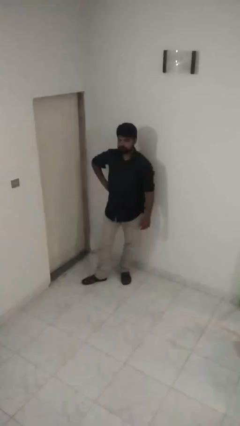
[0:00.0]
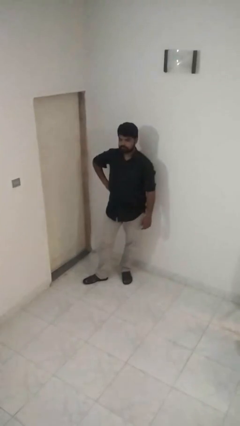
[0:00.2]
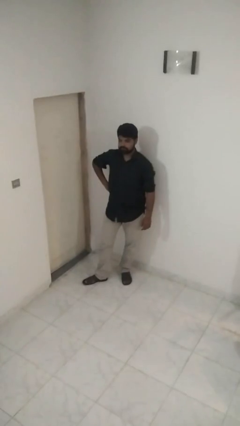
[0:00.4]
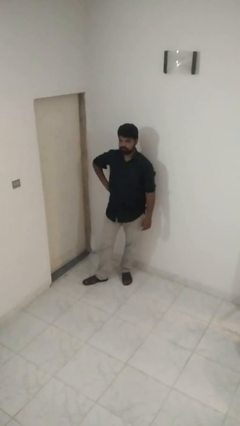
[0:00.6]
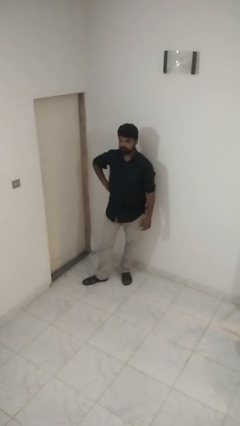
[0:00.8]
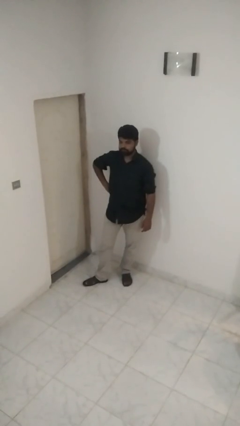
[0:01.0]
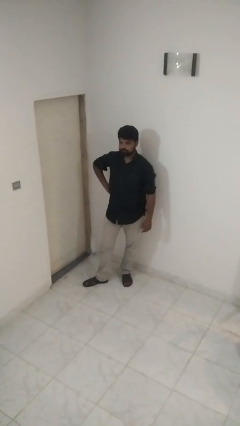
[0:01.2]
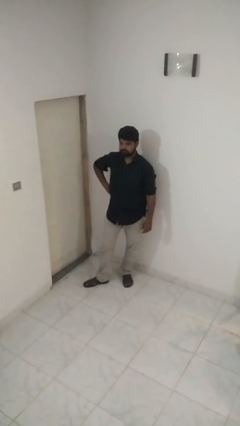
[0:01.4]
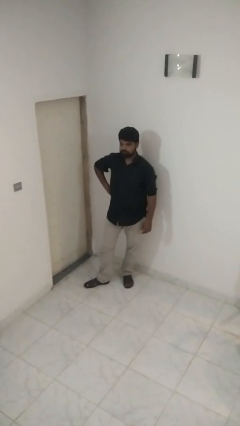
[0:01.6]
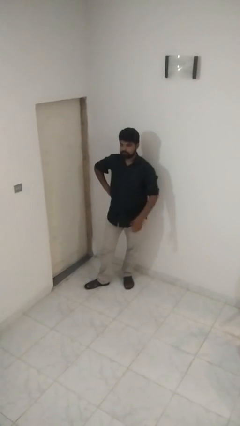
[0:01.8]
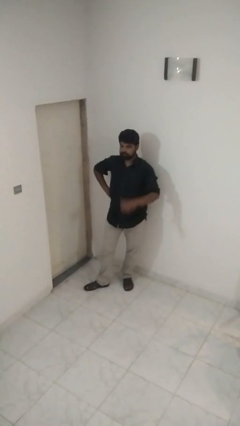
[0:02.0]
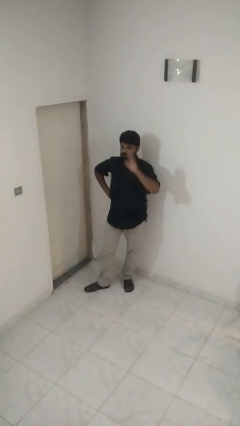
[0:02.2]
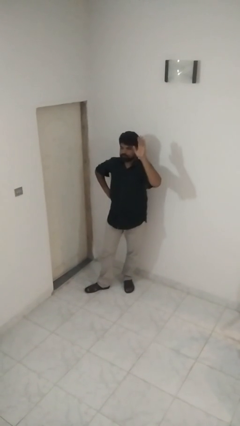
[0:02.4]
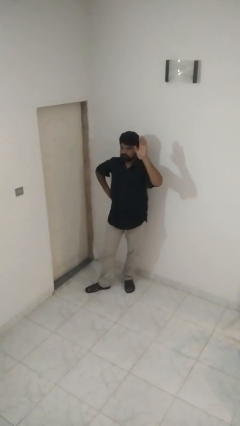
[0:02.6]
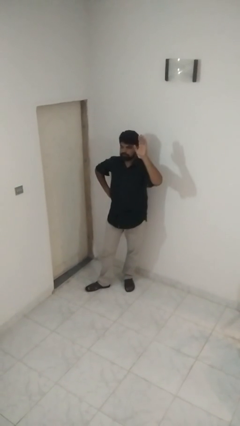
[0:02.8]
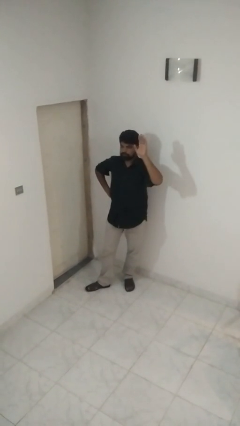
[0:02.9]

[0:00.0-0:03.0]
person gestures raise hand

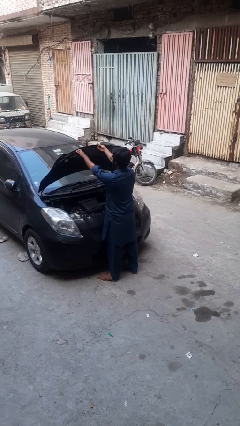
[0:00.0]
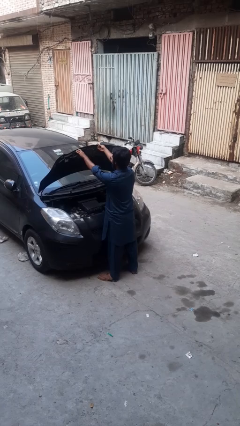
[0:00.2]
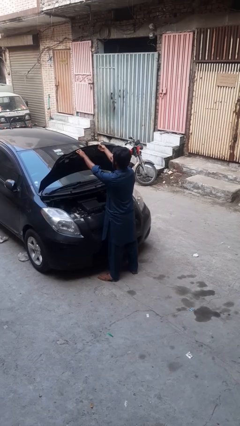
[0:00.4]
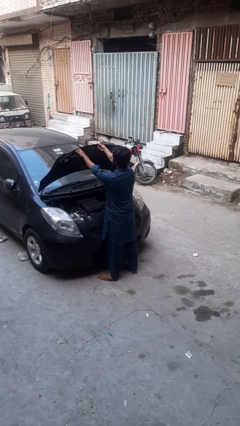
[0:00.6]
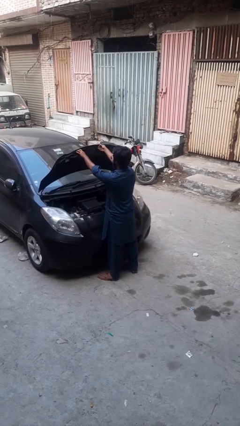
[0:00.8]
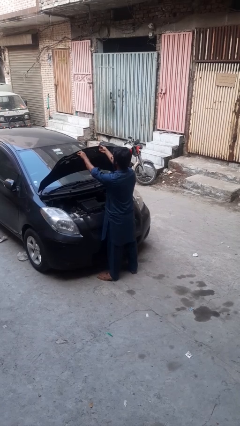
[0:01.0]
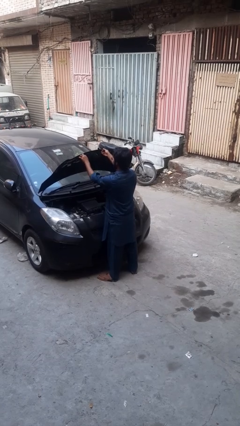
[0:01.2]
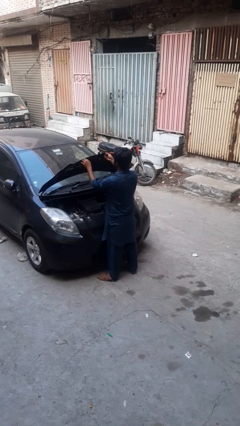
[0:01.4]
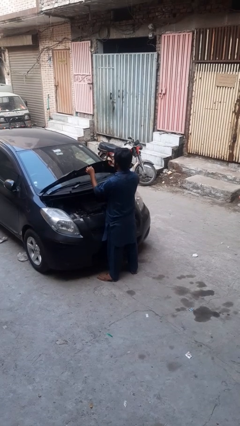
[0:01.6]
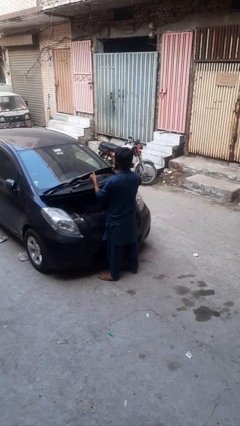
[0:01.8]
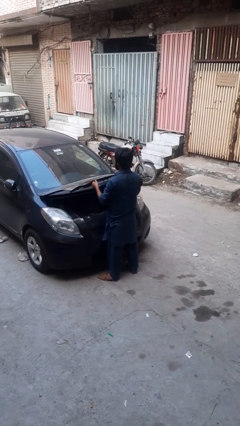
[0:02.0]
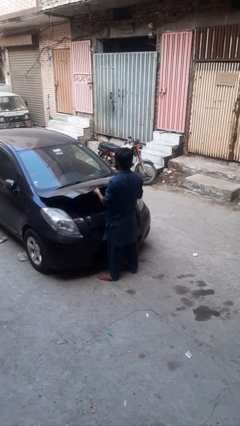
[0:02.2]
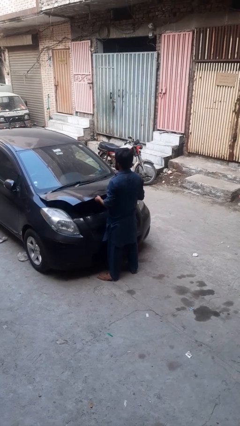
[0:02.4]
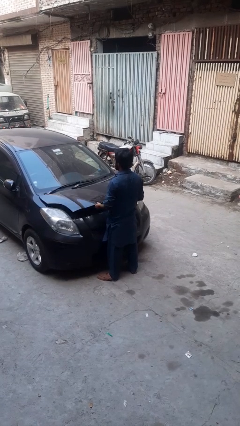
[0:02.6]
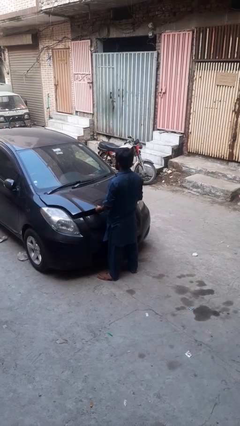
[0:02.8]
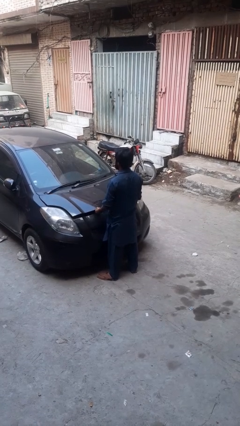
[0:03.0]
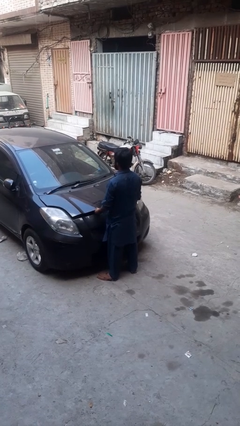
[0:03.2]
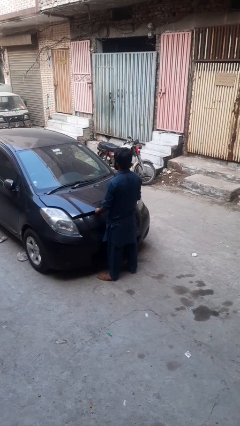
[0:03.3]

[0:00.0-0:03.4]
person closes car hood

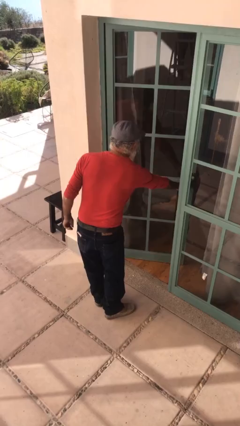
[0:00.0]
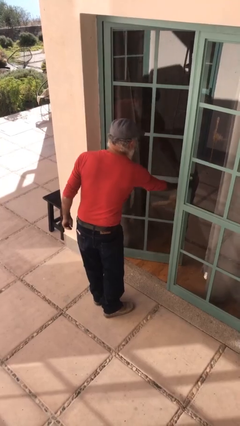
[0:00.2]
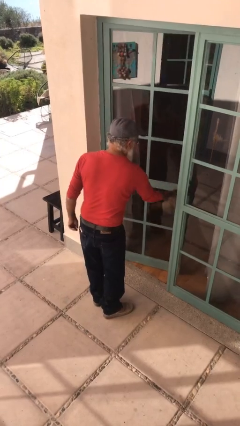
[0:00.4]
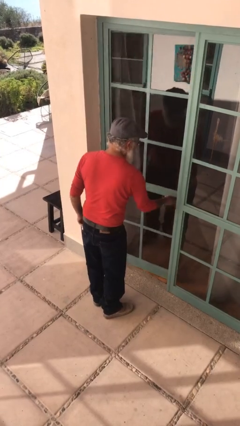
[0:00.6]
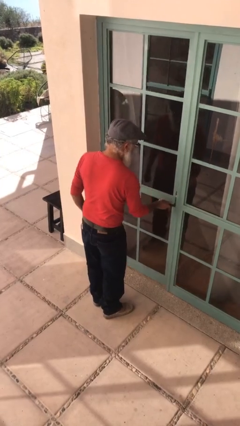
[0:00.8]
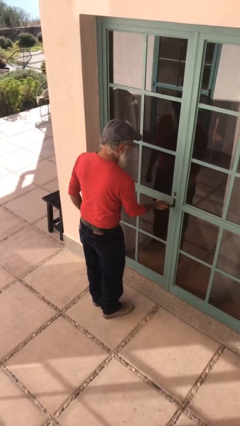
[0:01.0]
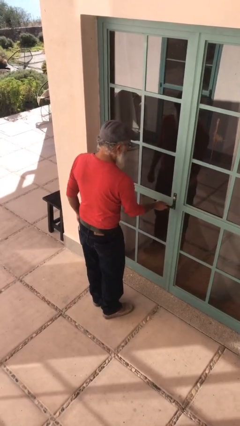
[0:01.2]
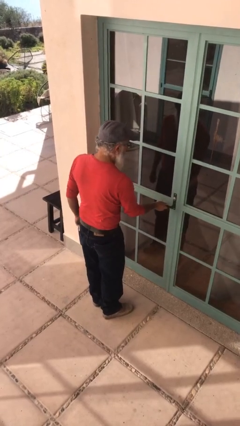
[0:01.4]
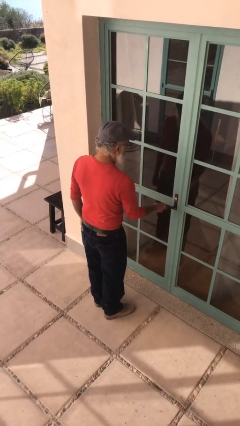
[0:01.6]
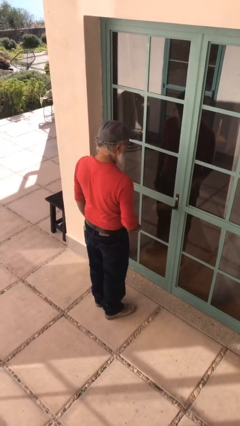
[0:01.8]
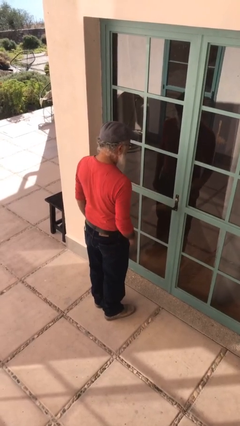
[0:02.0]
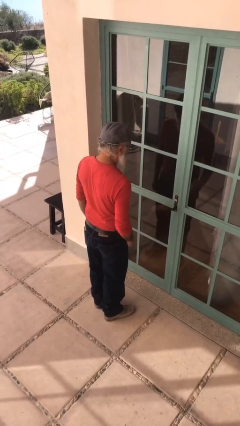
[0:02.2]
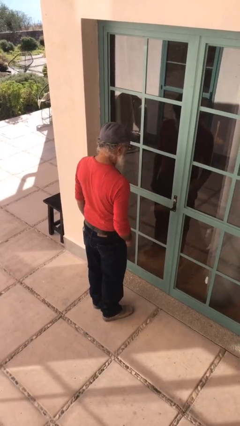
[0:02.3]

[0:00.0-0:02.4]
person closes facility door

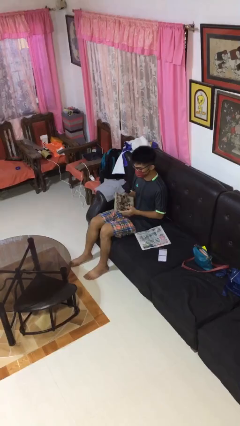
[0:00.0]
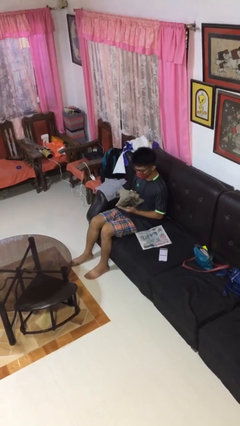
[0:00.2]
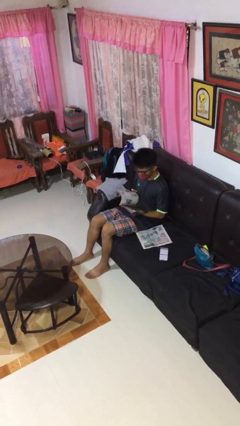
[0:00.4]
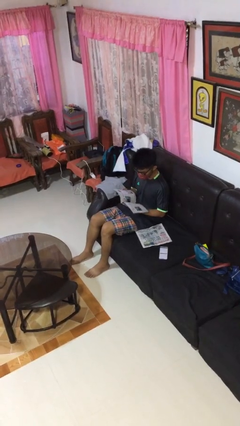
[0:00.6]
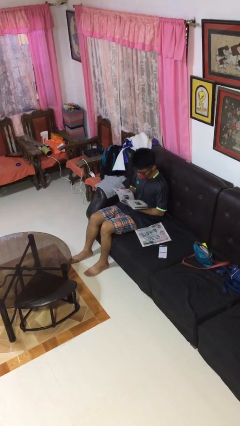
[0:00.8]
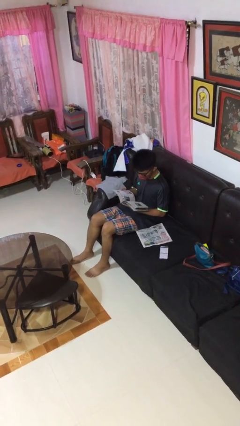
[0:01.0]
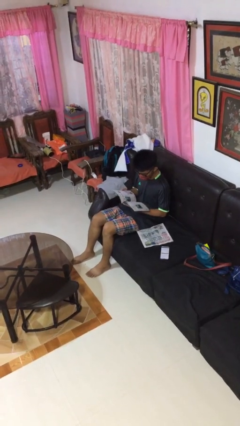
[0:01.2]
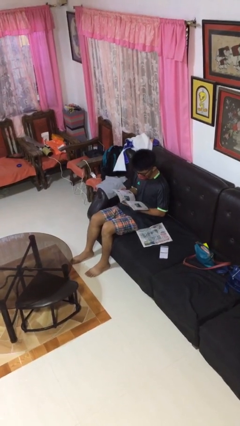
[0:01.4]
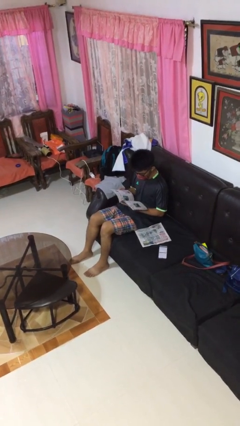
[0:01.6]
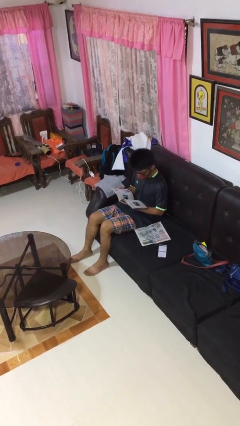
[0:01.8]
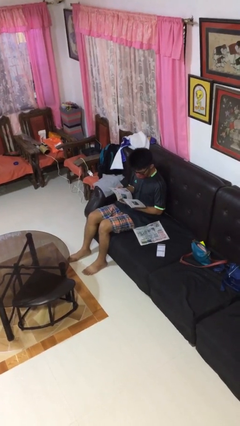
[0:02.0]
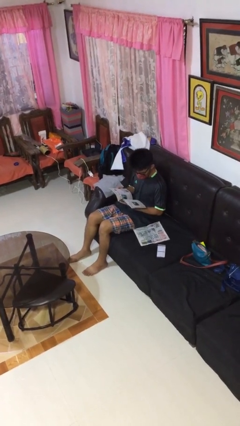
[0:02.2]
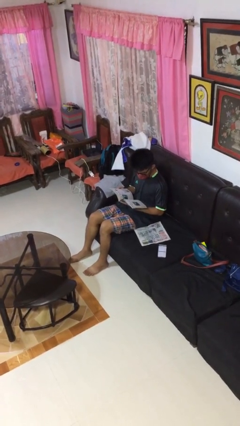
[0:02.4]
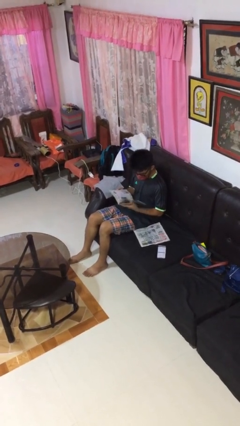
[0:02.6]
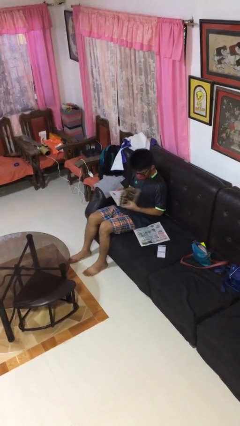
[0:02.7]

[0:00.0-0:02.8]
person reads magazine

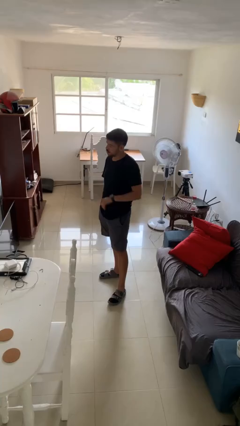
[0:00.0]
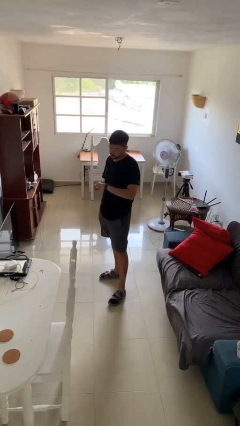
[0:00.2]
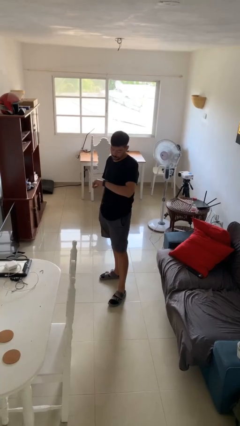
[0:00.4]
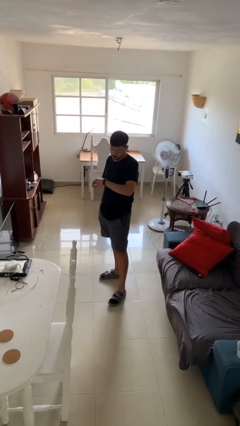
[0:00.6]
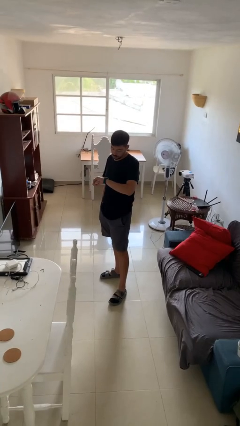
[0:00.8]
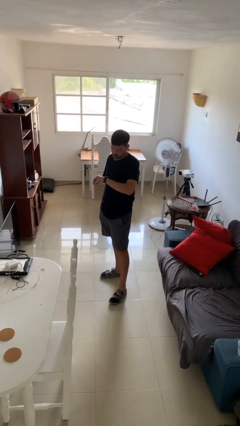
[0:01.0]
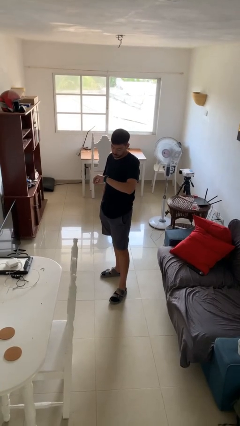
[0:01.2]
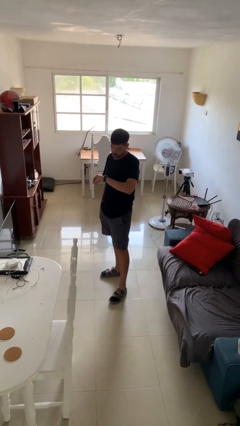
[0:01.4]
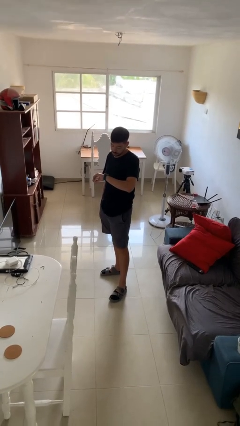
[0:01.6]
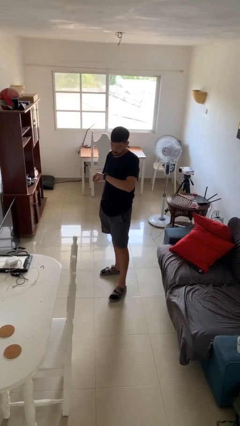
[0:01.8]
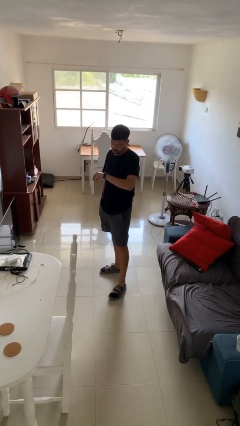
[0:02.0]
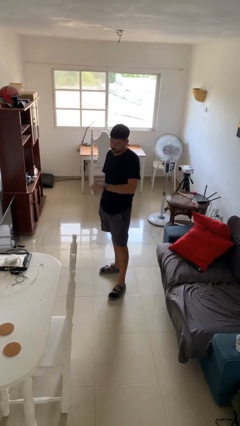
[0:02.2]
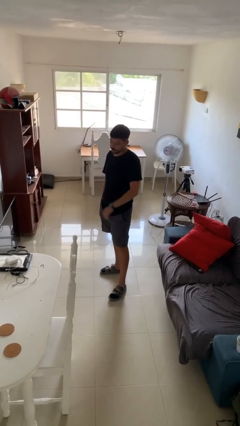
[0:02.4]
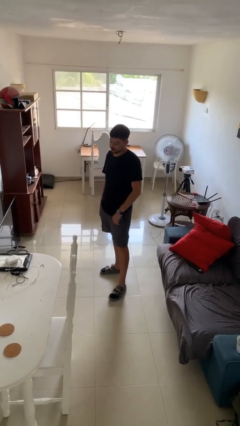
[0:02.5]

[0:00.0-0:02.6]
person looks at wristwatch

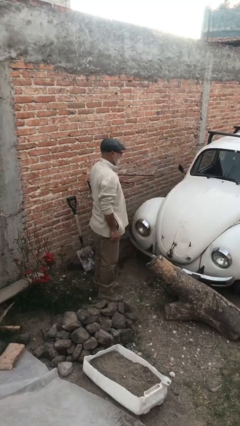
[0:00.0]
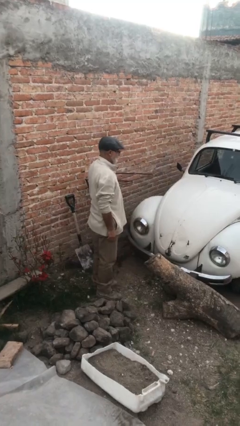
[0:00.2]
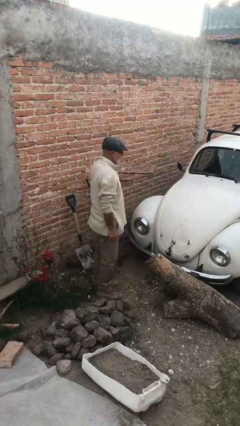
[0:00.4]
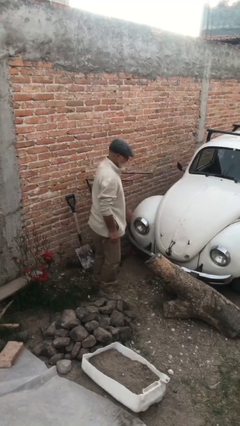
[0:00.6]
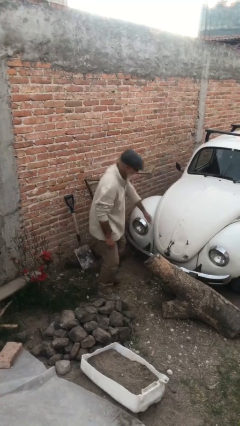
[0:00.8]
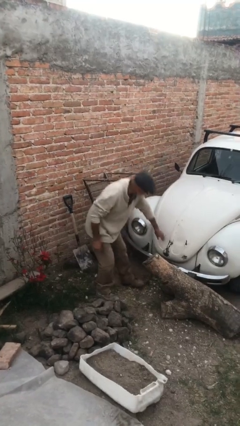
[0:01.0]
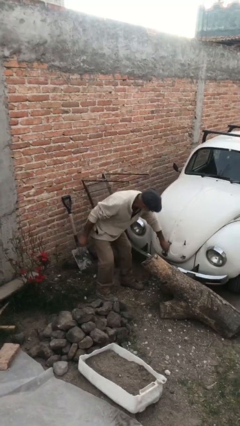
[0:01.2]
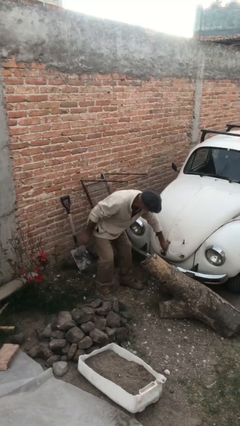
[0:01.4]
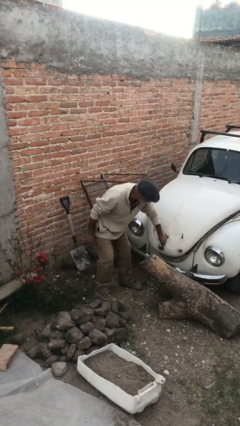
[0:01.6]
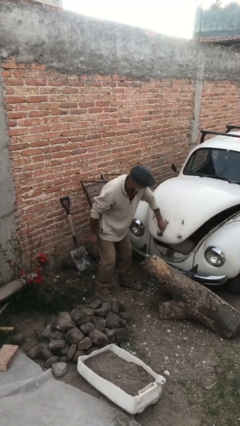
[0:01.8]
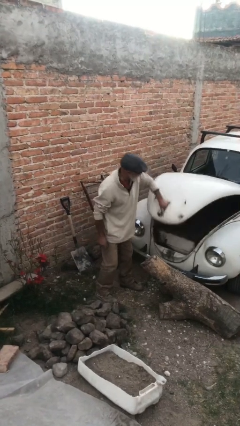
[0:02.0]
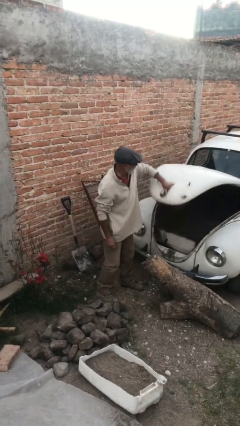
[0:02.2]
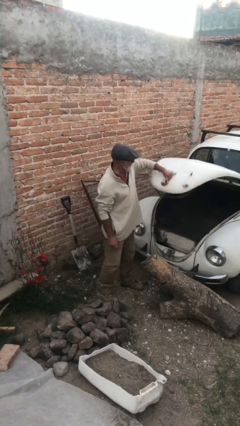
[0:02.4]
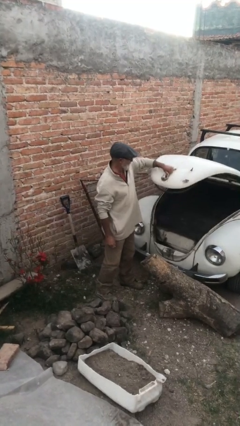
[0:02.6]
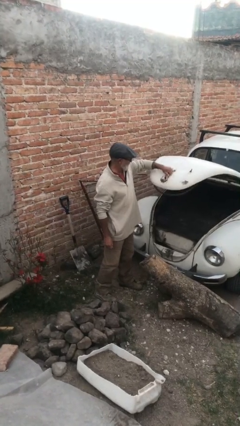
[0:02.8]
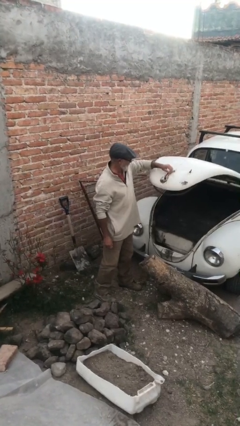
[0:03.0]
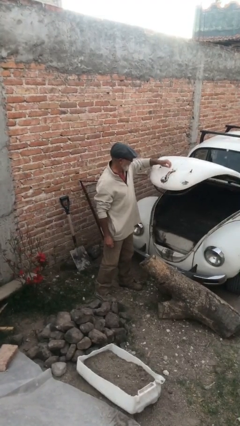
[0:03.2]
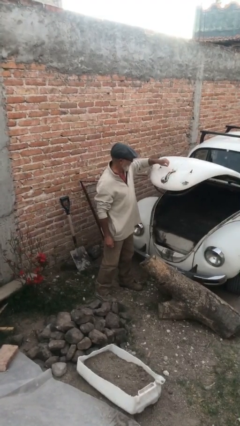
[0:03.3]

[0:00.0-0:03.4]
person opens car trunk
